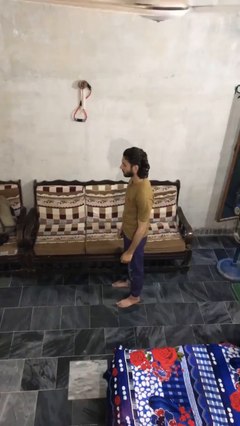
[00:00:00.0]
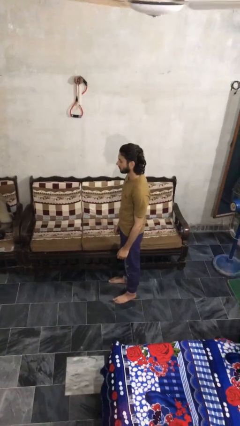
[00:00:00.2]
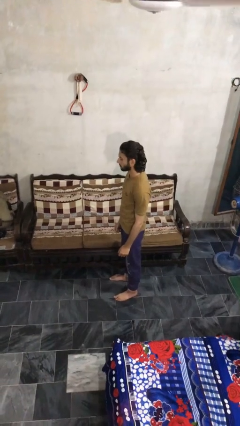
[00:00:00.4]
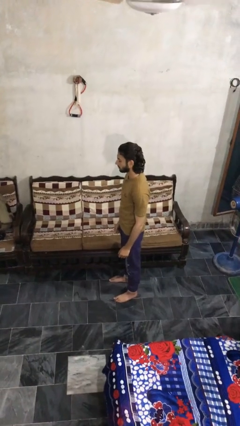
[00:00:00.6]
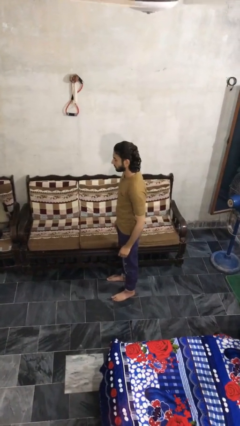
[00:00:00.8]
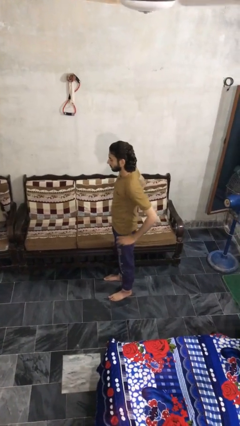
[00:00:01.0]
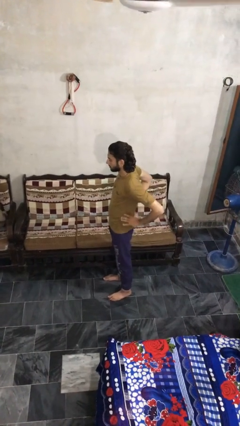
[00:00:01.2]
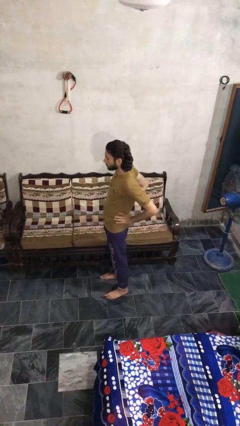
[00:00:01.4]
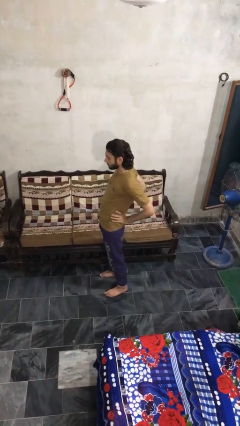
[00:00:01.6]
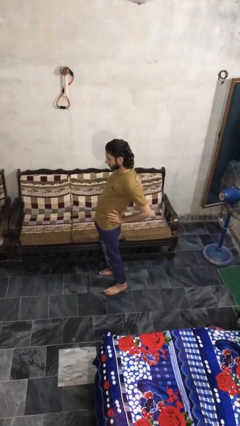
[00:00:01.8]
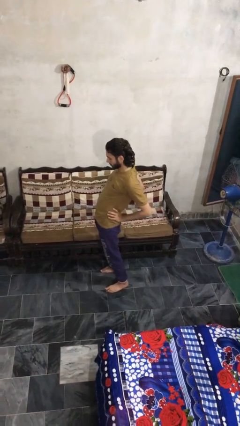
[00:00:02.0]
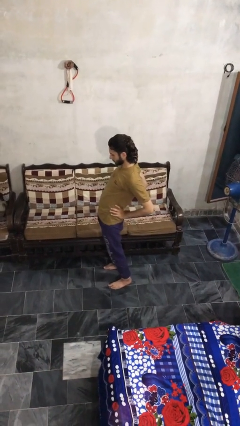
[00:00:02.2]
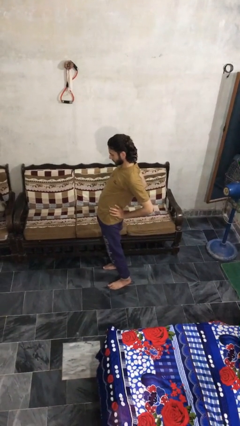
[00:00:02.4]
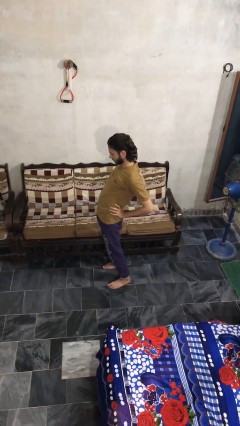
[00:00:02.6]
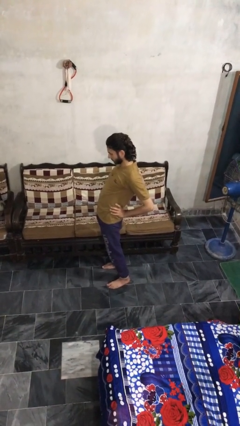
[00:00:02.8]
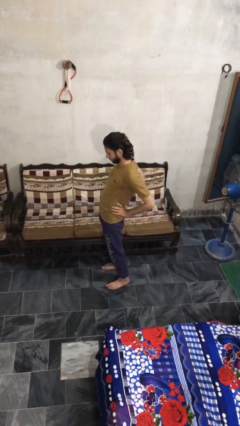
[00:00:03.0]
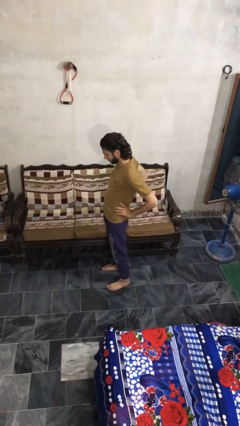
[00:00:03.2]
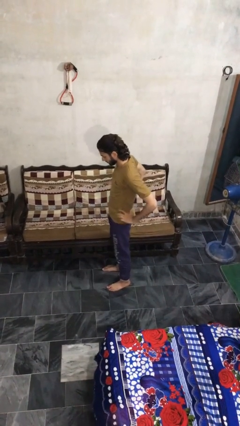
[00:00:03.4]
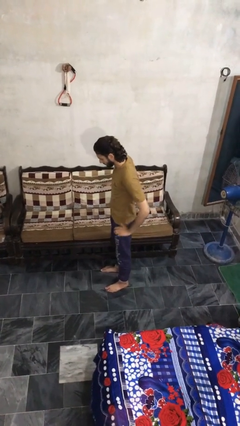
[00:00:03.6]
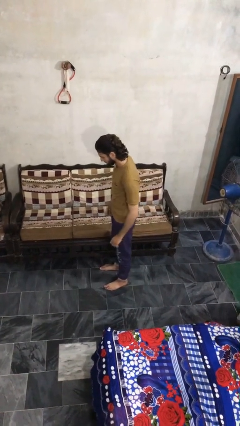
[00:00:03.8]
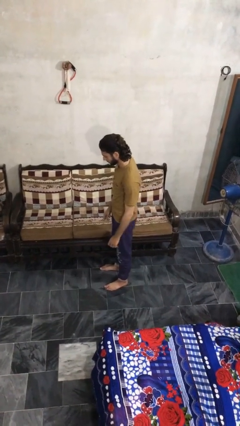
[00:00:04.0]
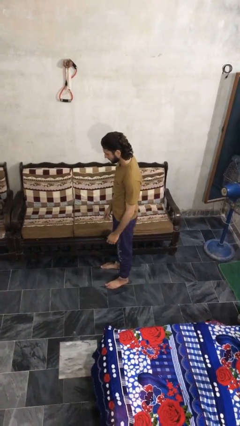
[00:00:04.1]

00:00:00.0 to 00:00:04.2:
person stretches back

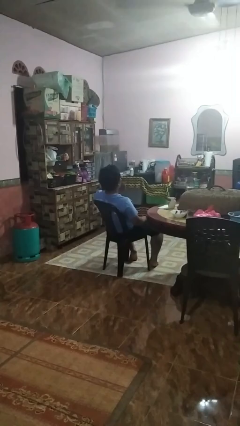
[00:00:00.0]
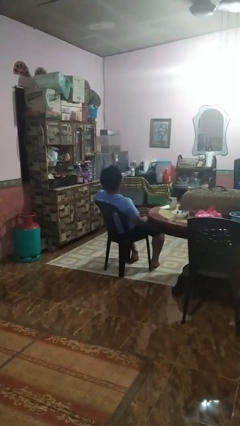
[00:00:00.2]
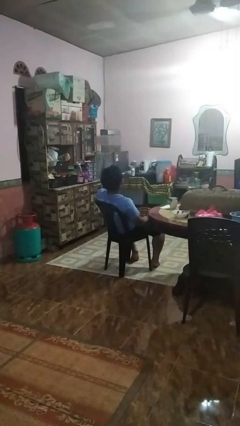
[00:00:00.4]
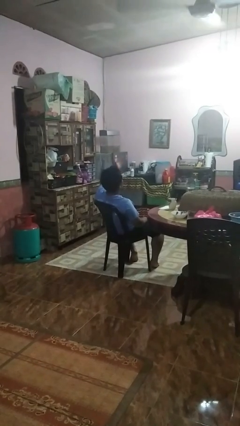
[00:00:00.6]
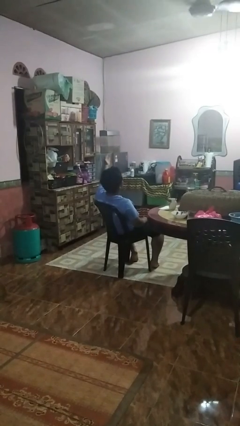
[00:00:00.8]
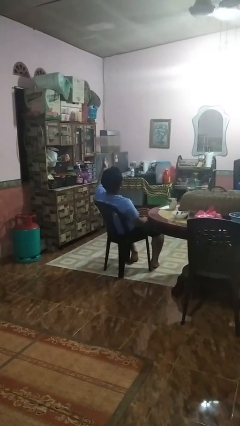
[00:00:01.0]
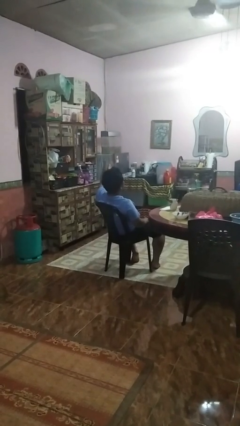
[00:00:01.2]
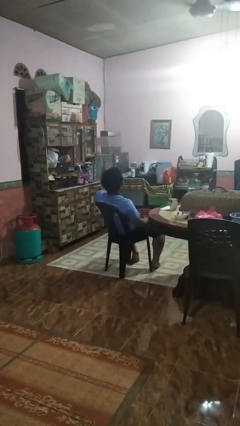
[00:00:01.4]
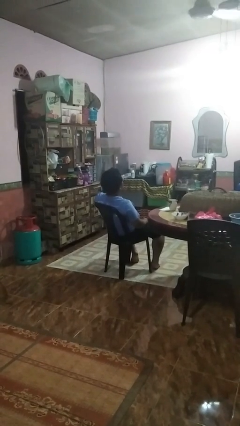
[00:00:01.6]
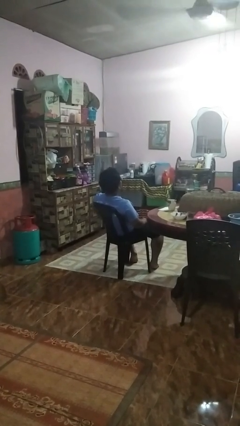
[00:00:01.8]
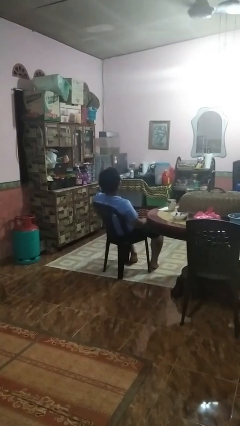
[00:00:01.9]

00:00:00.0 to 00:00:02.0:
person gestures blow kiss

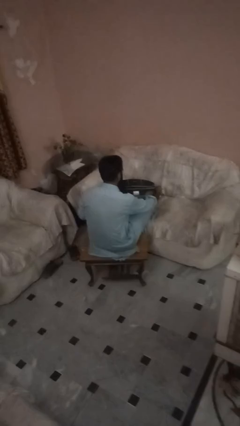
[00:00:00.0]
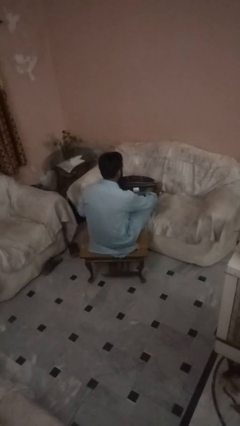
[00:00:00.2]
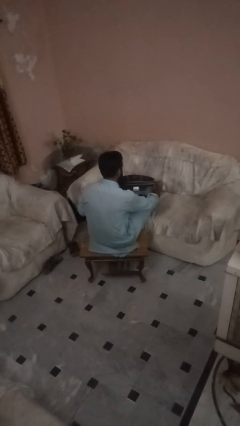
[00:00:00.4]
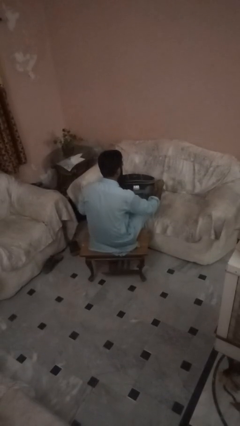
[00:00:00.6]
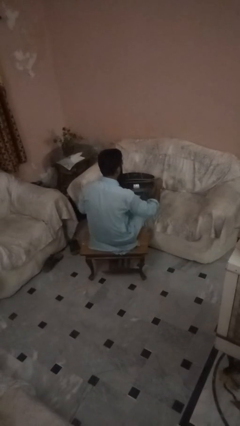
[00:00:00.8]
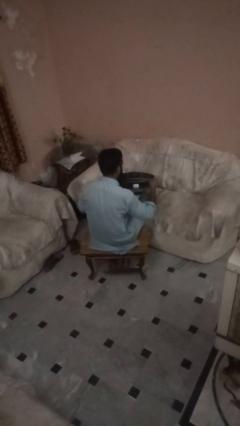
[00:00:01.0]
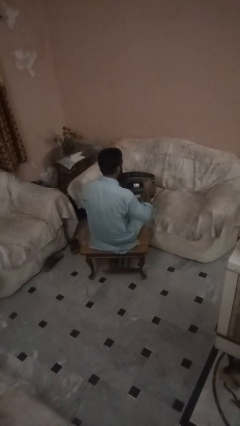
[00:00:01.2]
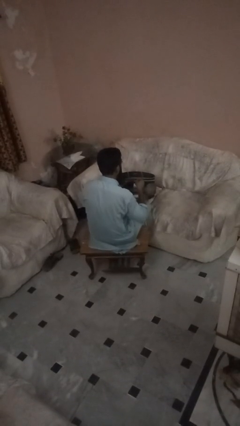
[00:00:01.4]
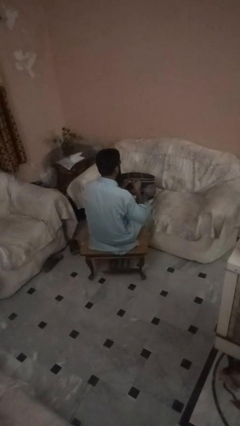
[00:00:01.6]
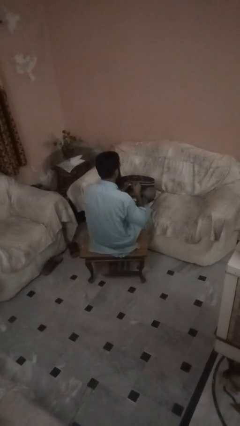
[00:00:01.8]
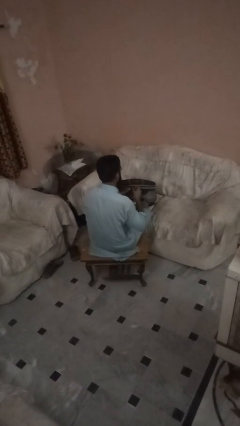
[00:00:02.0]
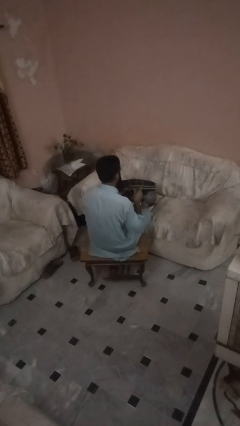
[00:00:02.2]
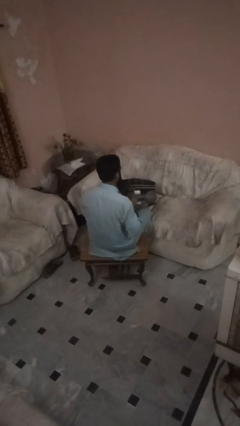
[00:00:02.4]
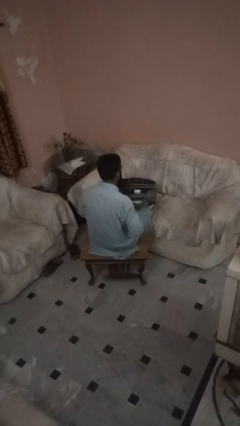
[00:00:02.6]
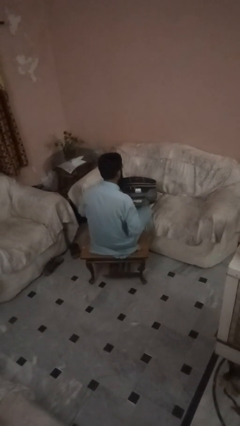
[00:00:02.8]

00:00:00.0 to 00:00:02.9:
person closes suitcase

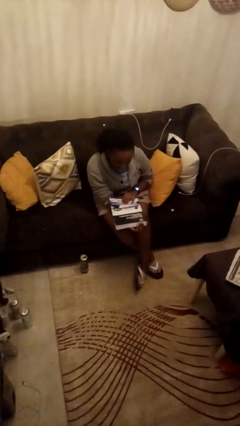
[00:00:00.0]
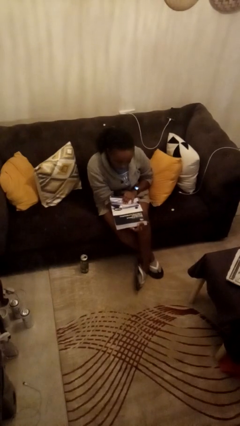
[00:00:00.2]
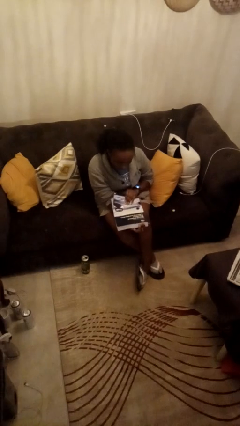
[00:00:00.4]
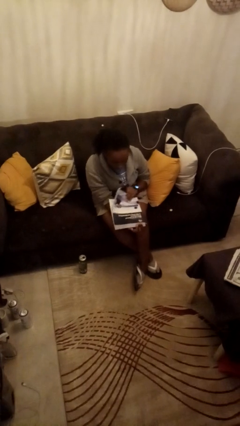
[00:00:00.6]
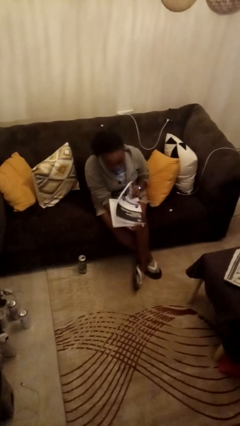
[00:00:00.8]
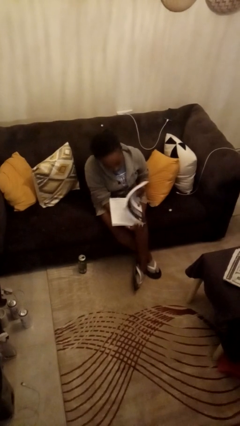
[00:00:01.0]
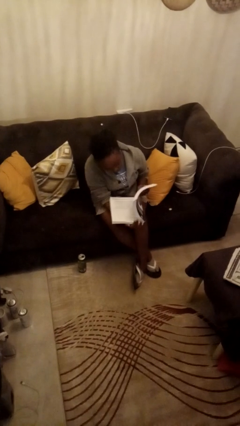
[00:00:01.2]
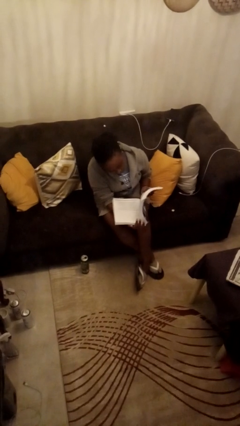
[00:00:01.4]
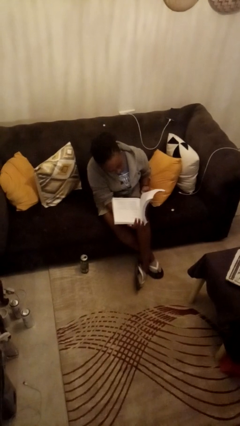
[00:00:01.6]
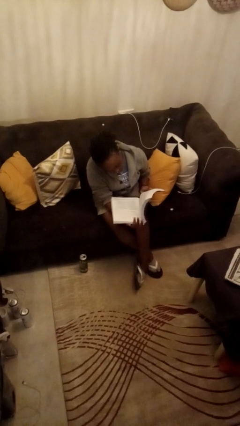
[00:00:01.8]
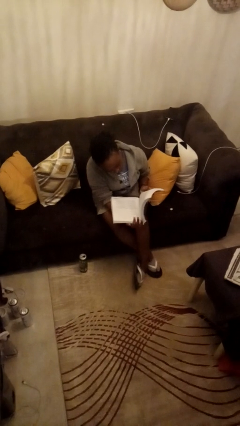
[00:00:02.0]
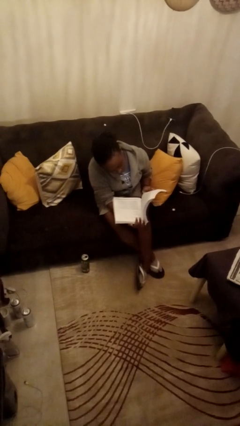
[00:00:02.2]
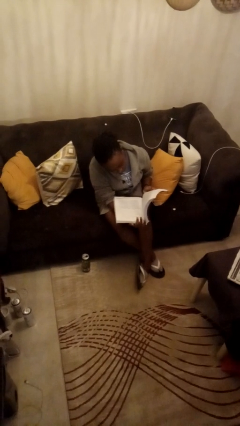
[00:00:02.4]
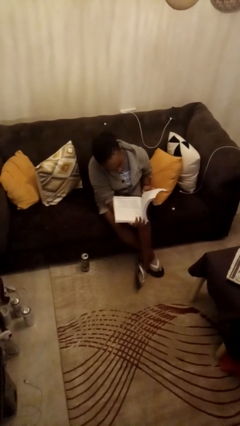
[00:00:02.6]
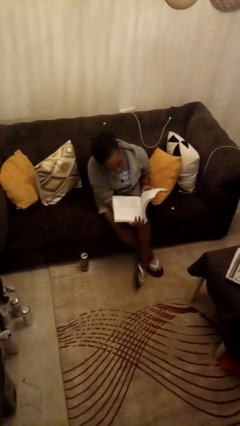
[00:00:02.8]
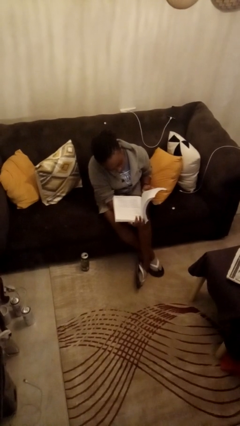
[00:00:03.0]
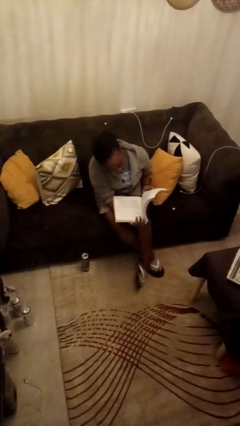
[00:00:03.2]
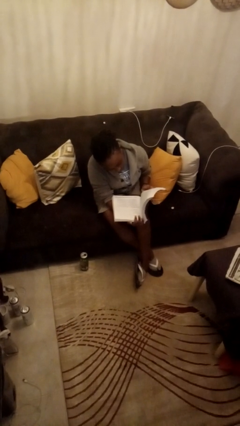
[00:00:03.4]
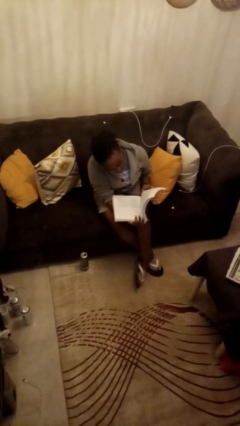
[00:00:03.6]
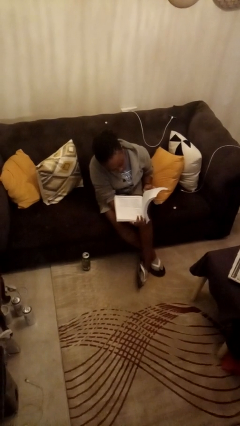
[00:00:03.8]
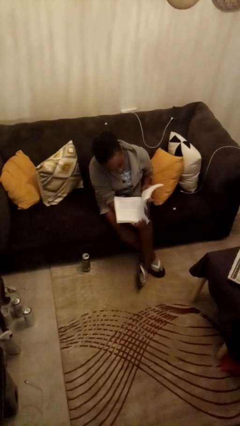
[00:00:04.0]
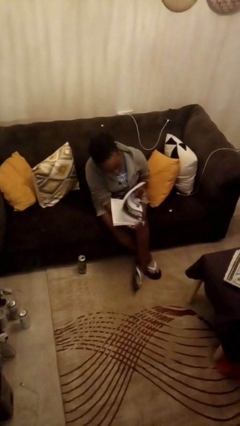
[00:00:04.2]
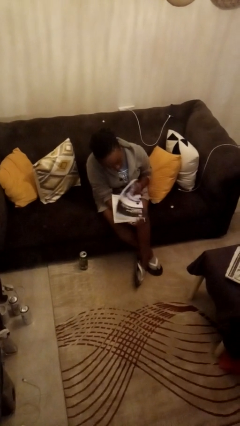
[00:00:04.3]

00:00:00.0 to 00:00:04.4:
person reads book

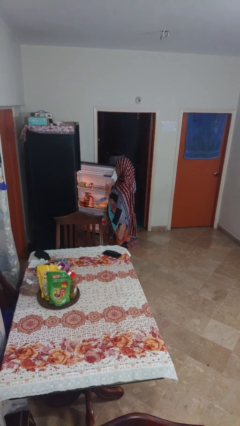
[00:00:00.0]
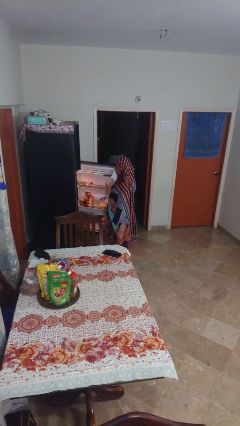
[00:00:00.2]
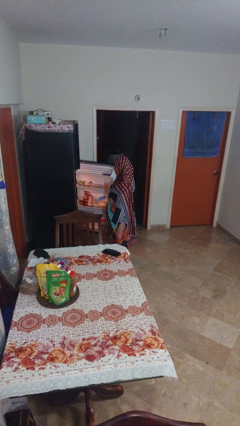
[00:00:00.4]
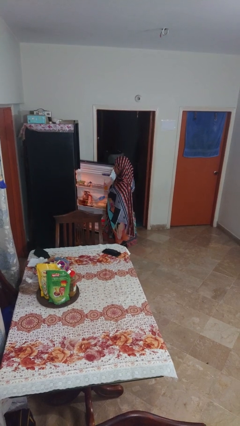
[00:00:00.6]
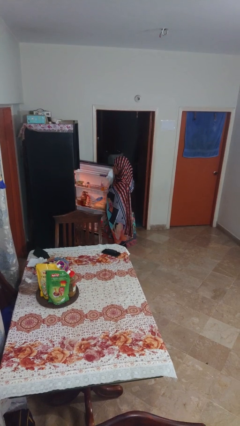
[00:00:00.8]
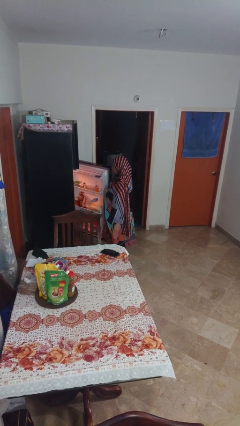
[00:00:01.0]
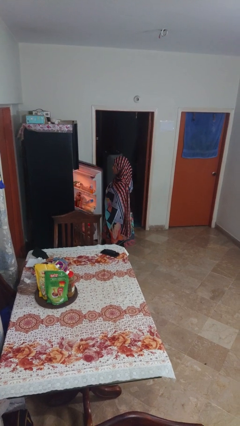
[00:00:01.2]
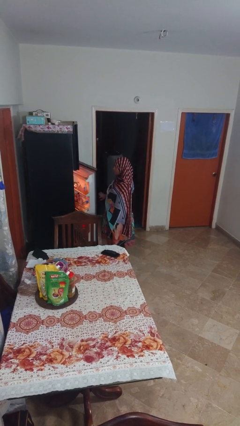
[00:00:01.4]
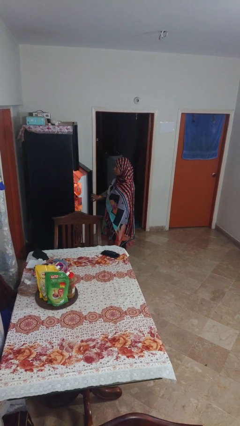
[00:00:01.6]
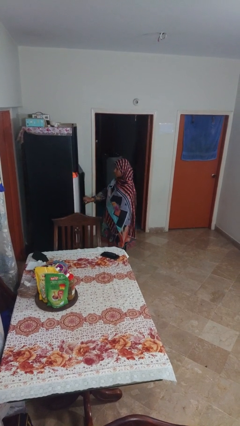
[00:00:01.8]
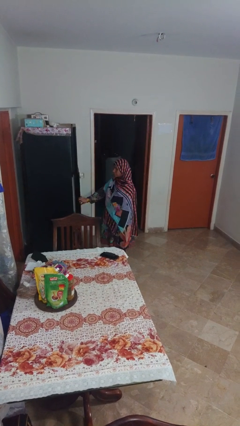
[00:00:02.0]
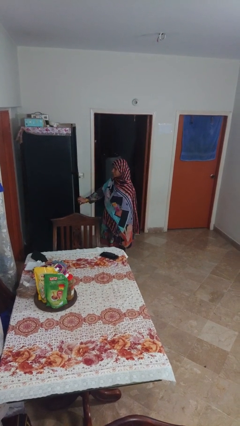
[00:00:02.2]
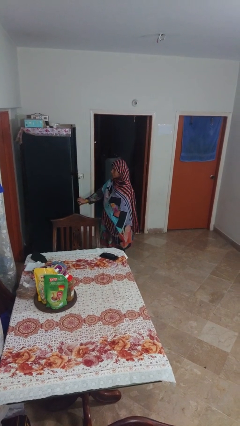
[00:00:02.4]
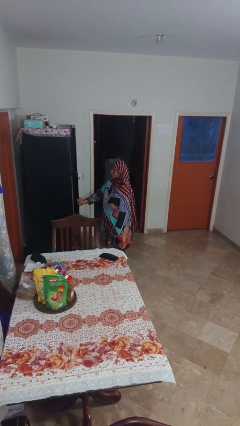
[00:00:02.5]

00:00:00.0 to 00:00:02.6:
person closes refrigerator

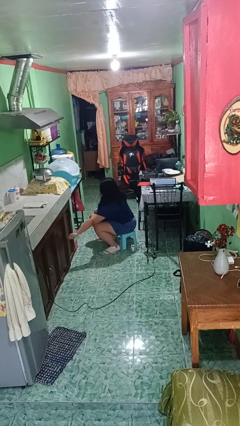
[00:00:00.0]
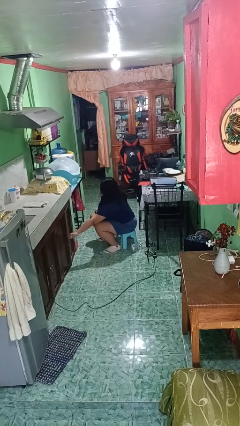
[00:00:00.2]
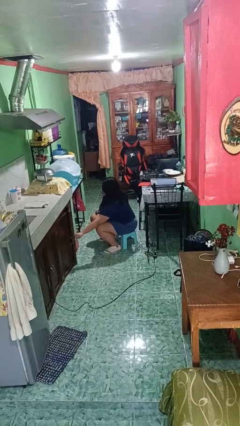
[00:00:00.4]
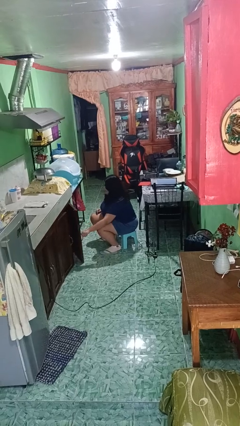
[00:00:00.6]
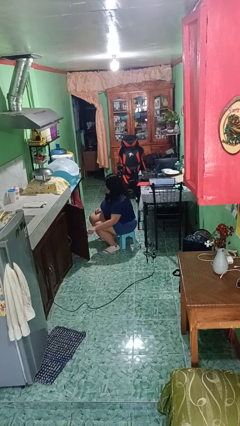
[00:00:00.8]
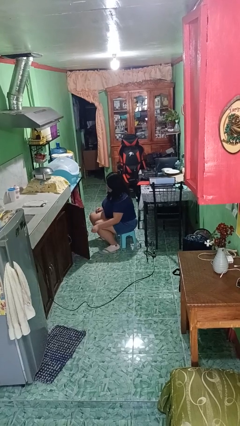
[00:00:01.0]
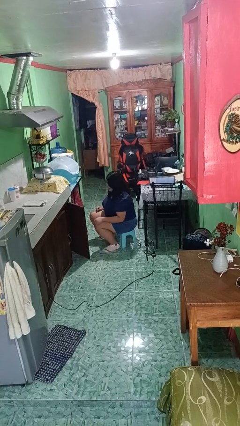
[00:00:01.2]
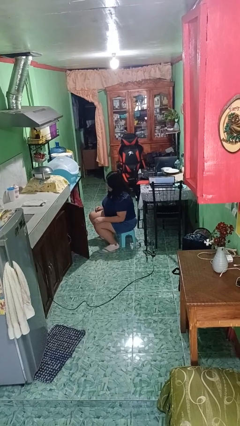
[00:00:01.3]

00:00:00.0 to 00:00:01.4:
person opens cabinet
